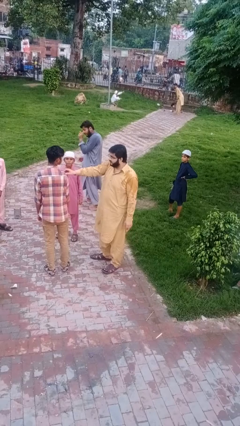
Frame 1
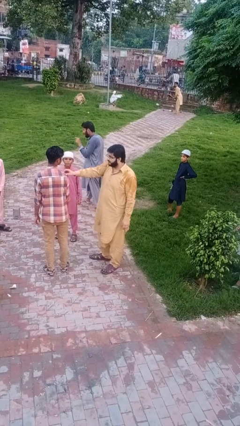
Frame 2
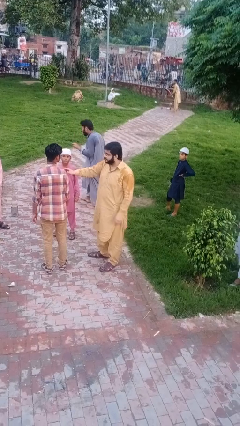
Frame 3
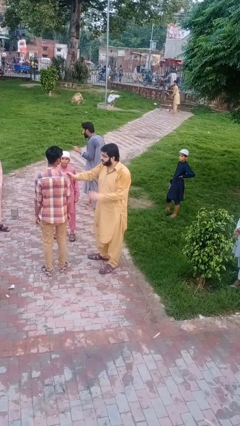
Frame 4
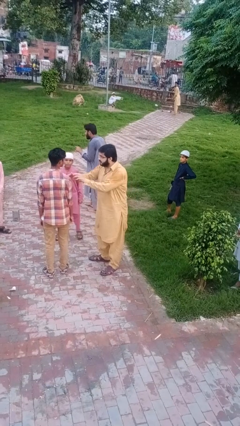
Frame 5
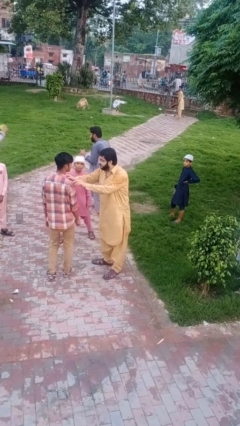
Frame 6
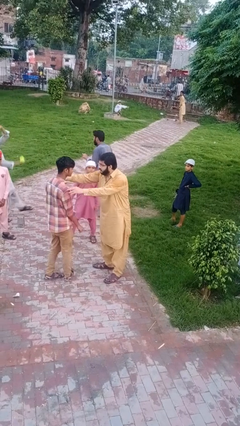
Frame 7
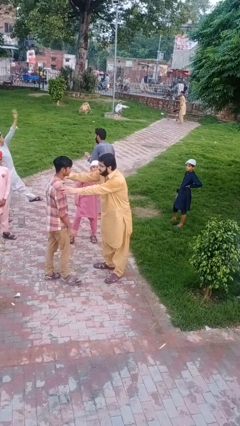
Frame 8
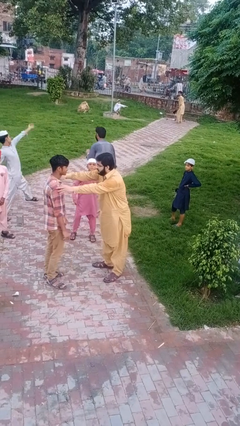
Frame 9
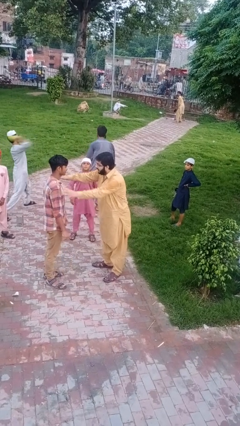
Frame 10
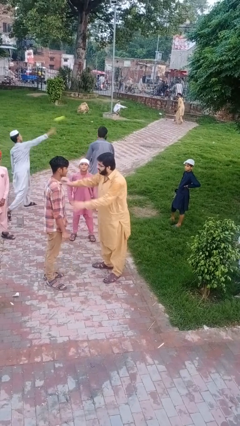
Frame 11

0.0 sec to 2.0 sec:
person spins person around

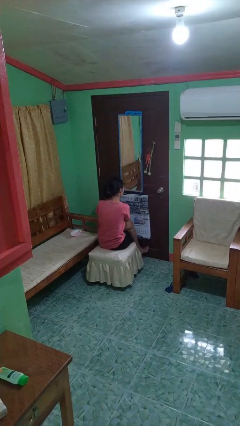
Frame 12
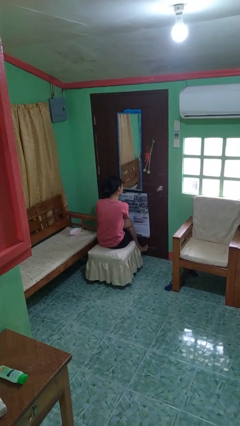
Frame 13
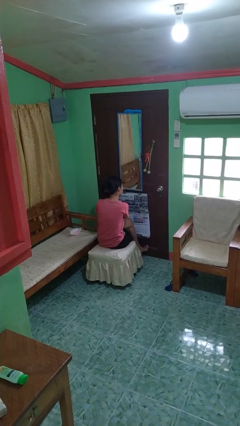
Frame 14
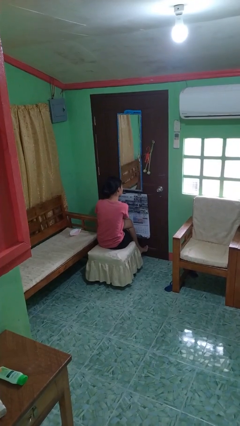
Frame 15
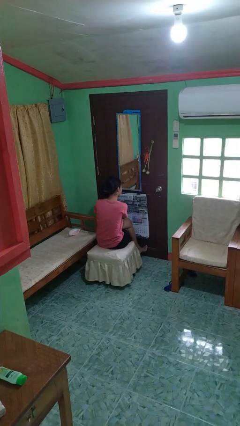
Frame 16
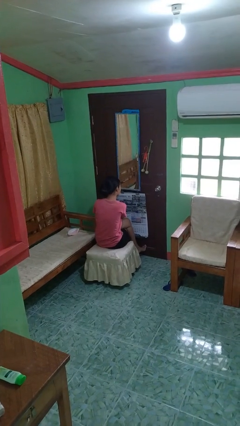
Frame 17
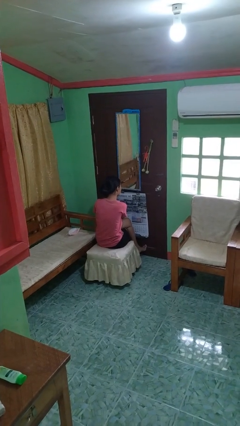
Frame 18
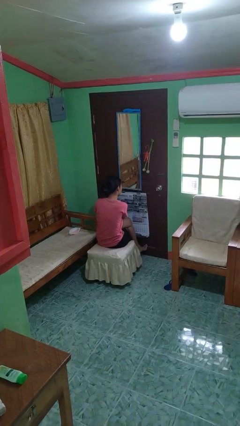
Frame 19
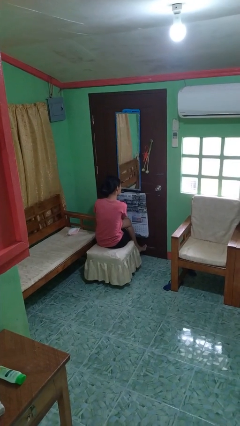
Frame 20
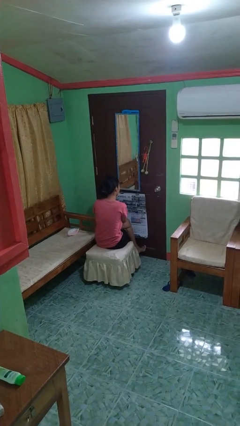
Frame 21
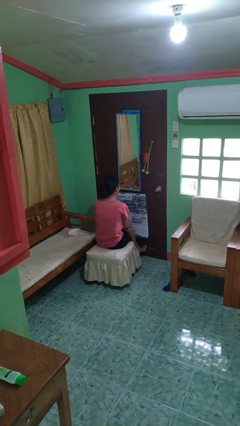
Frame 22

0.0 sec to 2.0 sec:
person puts on earrings

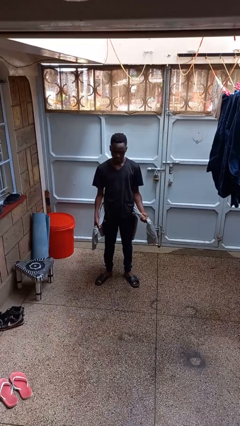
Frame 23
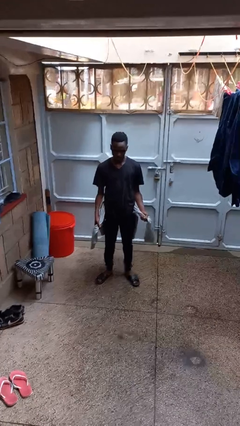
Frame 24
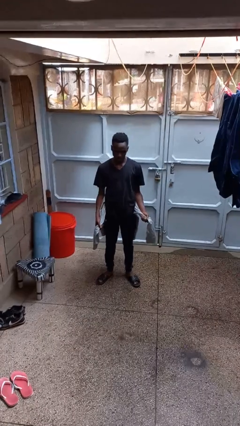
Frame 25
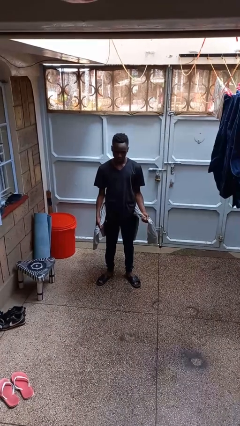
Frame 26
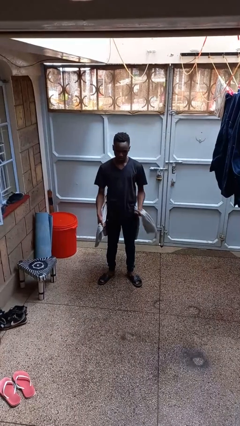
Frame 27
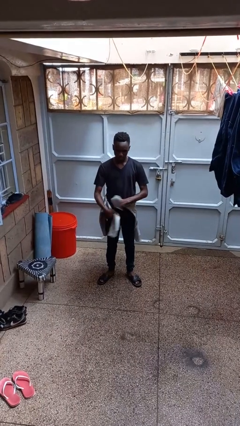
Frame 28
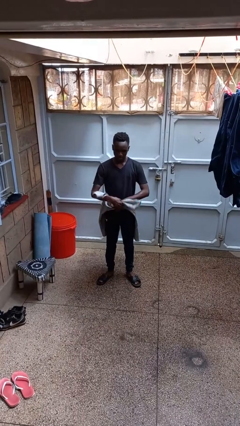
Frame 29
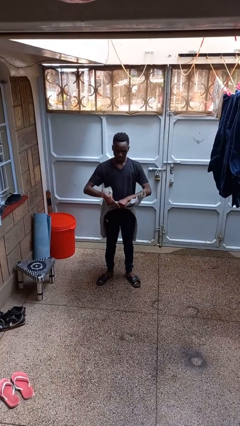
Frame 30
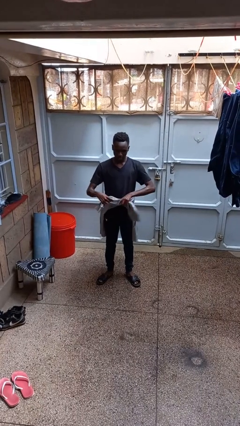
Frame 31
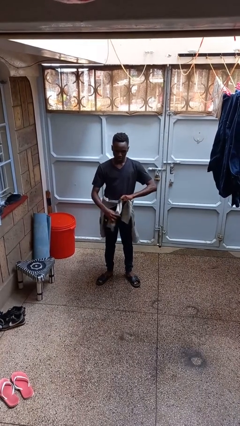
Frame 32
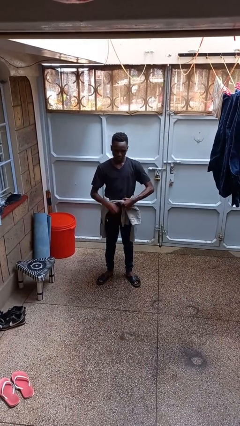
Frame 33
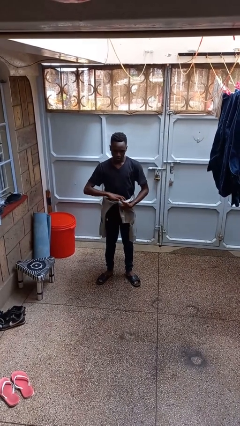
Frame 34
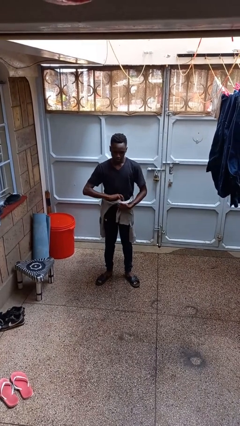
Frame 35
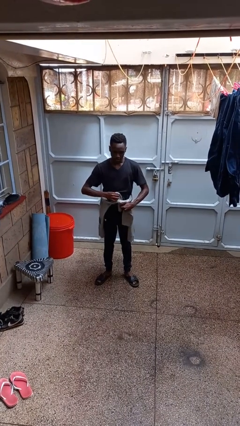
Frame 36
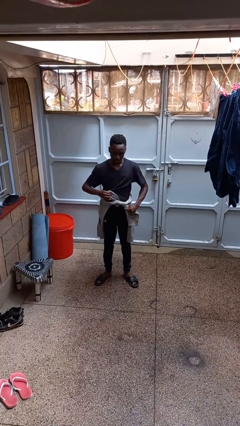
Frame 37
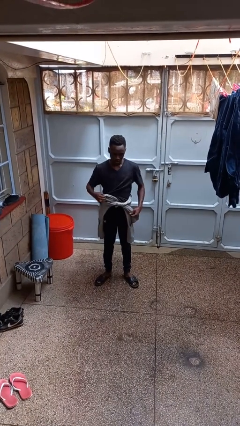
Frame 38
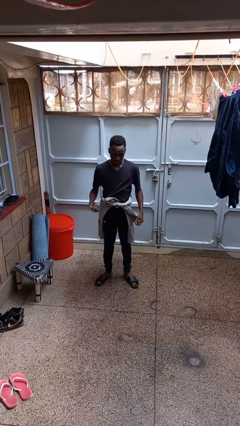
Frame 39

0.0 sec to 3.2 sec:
person ties jacket around waist

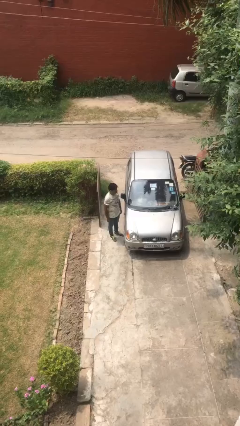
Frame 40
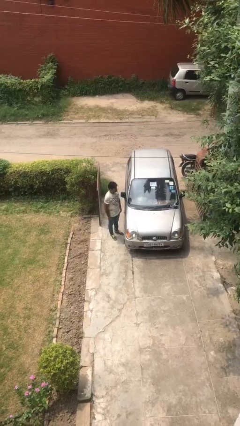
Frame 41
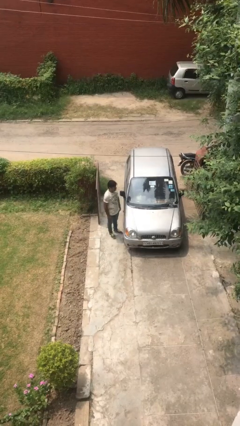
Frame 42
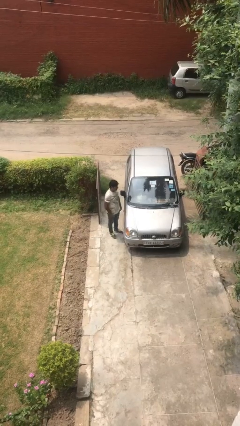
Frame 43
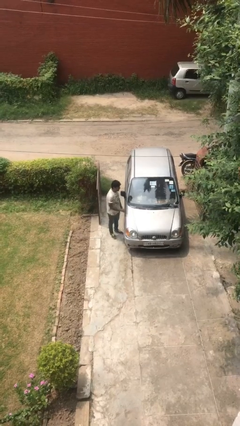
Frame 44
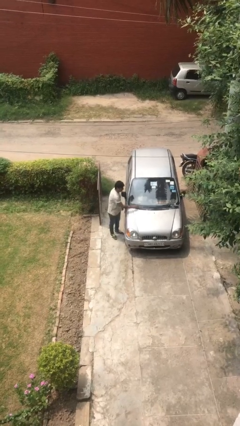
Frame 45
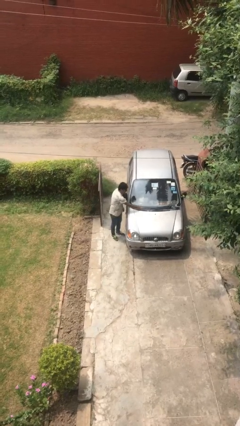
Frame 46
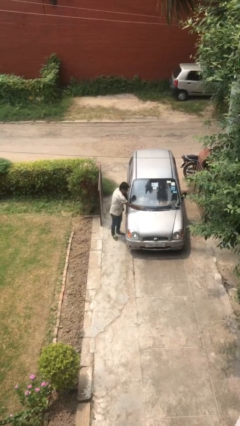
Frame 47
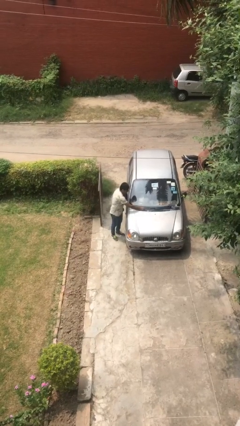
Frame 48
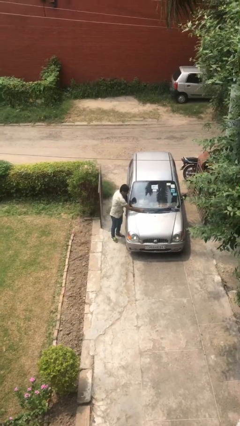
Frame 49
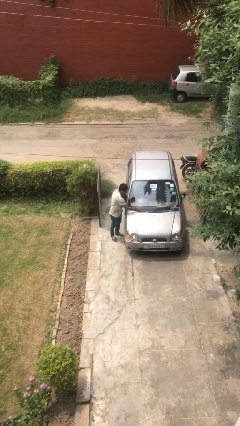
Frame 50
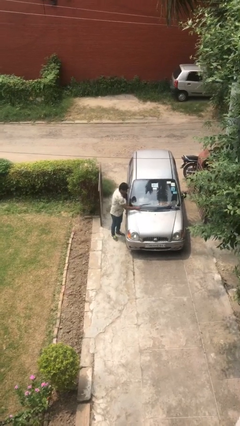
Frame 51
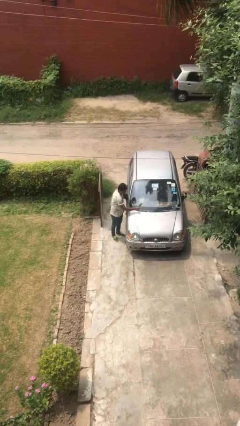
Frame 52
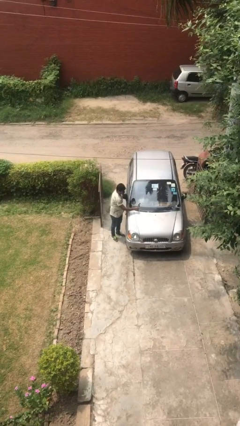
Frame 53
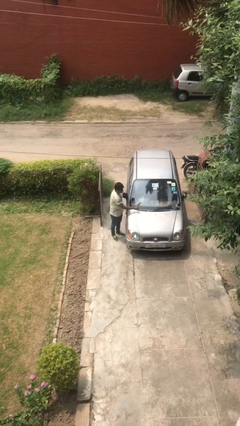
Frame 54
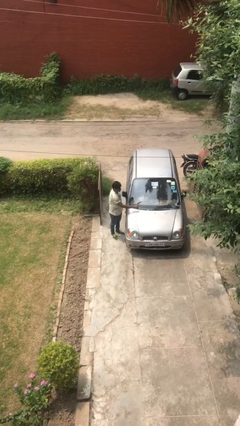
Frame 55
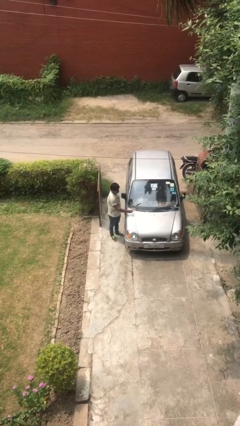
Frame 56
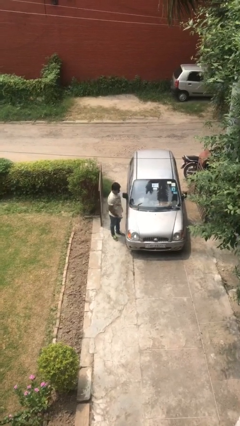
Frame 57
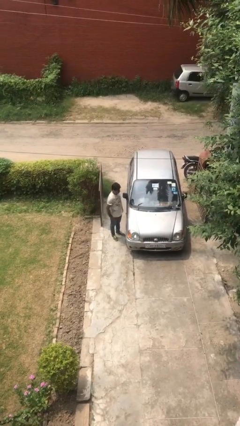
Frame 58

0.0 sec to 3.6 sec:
person flips up car wipers

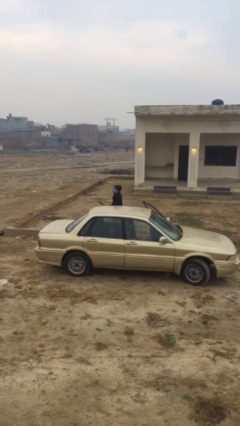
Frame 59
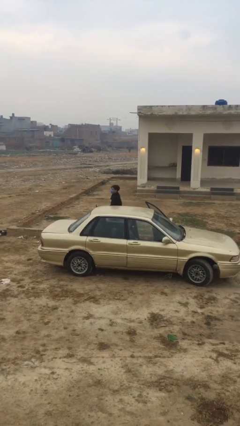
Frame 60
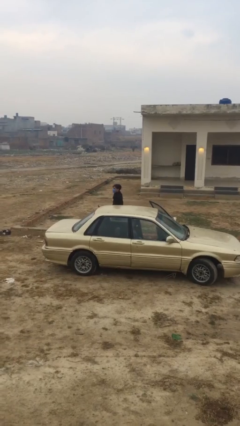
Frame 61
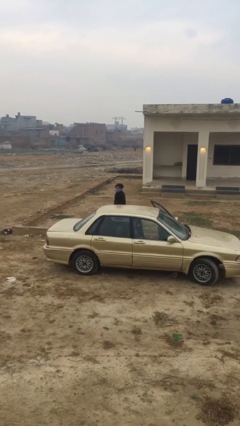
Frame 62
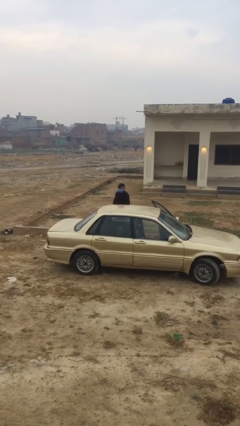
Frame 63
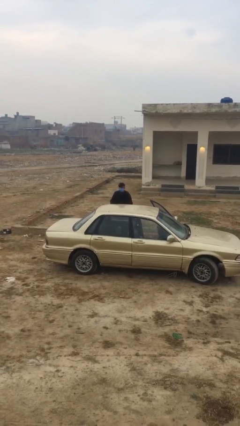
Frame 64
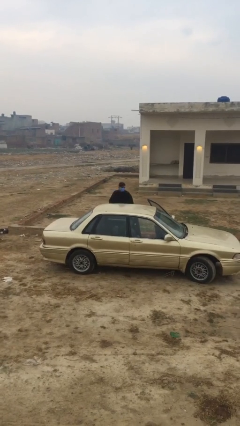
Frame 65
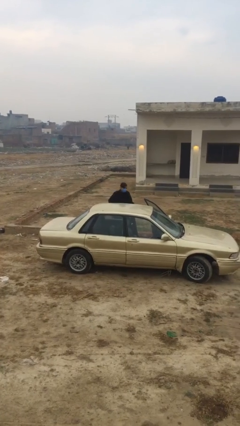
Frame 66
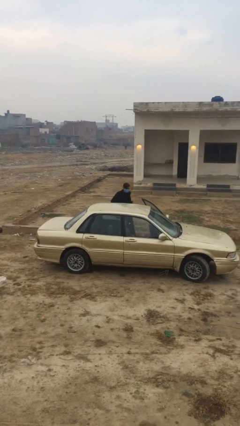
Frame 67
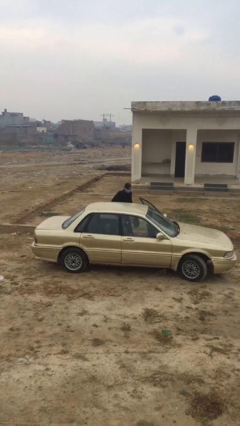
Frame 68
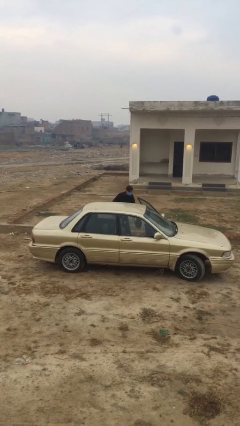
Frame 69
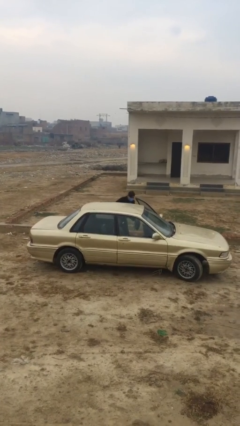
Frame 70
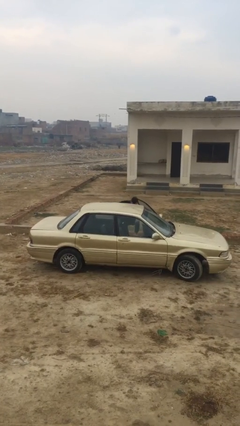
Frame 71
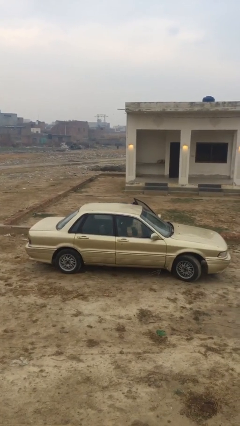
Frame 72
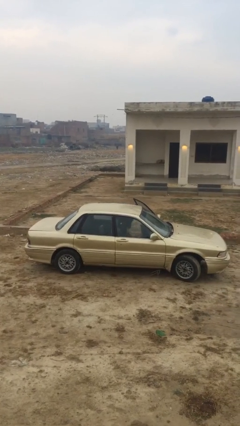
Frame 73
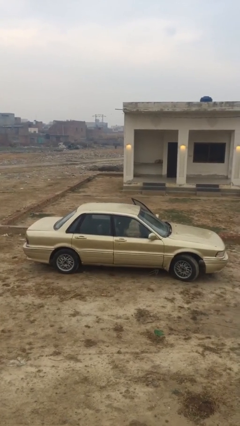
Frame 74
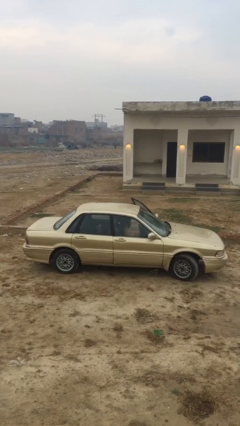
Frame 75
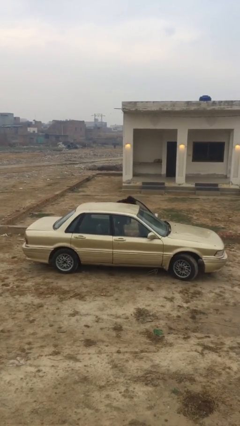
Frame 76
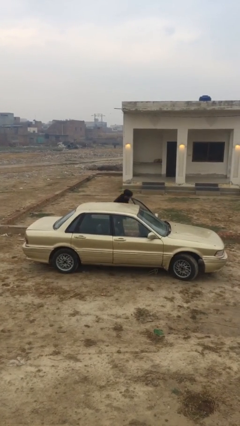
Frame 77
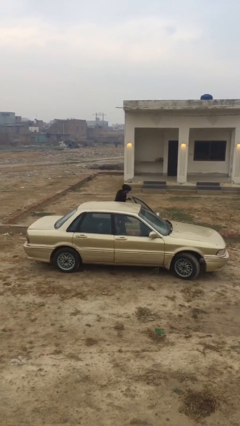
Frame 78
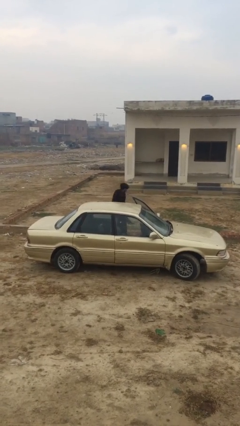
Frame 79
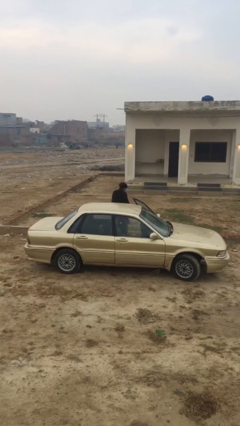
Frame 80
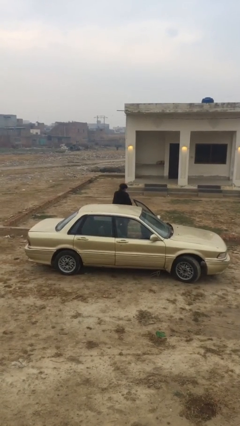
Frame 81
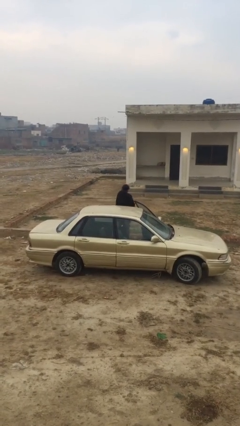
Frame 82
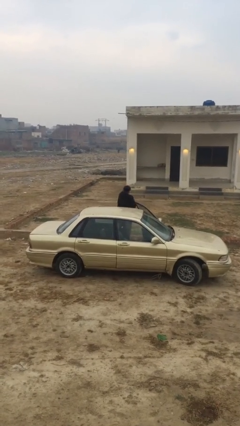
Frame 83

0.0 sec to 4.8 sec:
person loads car

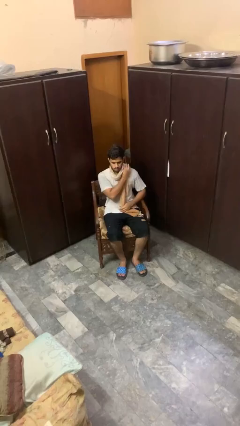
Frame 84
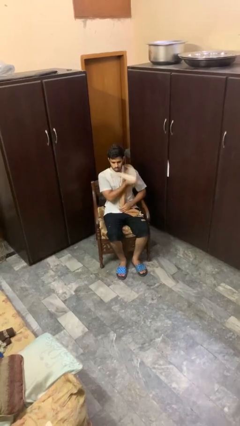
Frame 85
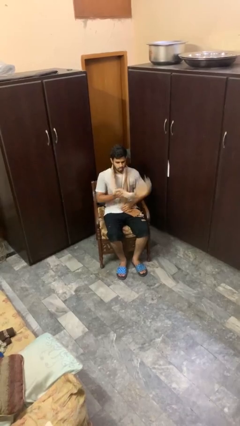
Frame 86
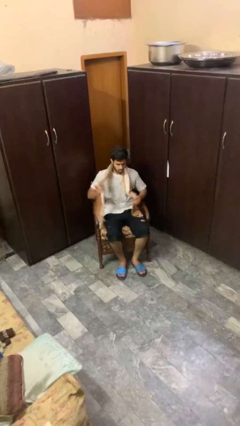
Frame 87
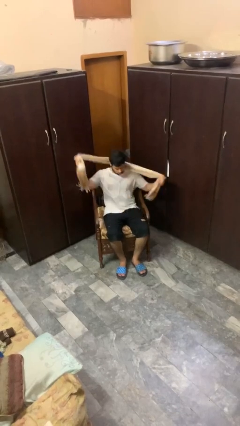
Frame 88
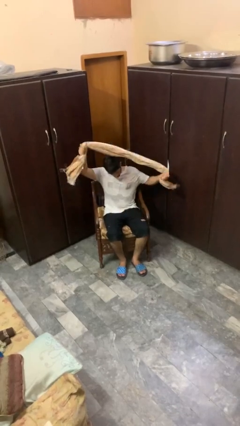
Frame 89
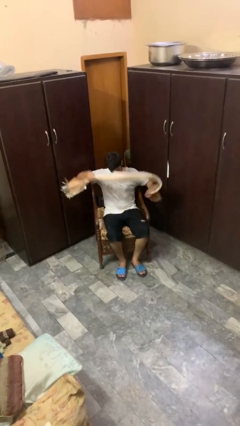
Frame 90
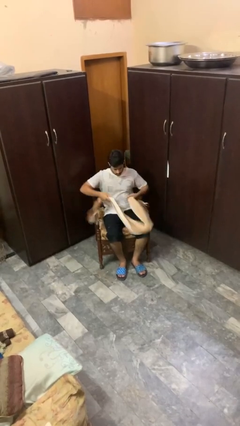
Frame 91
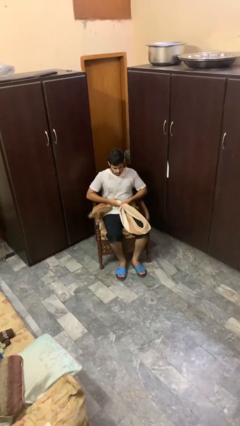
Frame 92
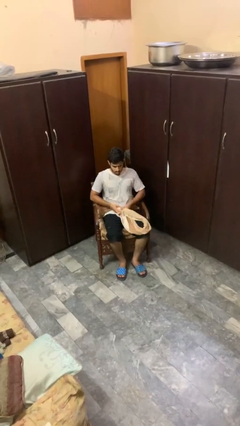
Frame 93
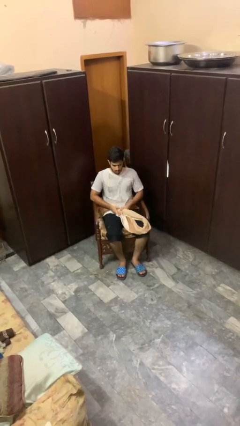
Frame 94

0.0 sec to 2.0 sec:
person takes off scarf
